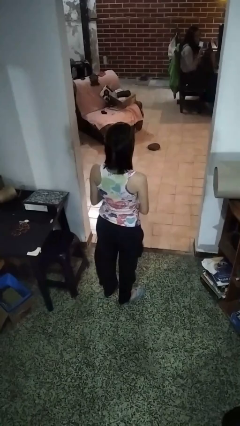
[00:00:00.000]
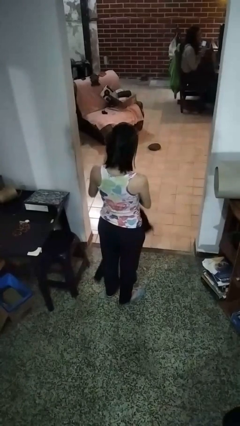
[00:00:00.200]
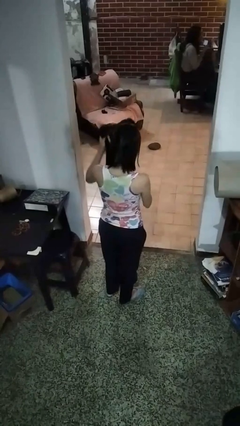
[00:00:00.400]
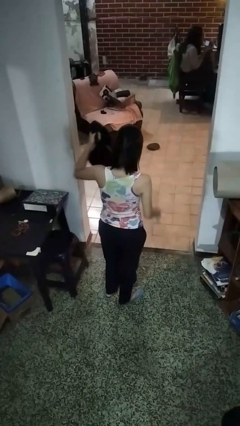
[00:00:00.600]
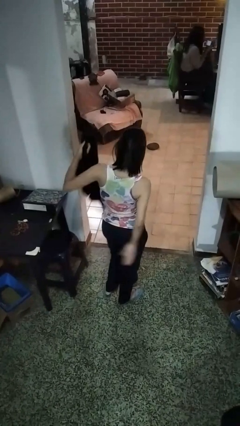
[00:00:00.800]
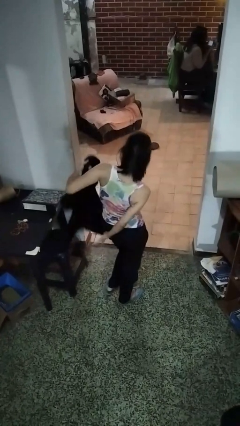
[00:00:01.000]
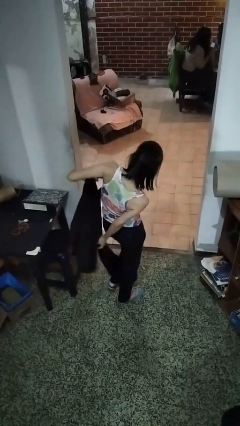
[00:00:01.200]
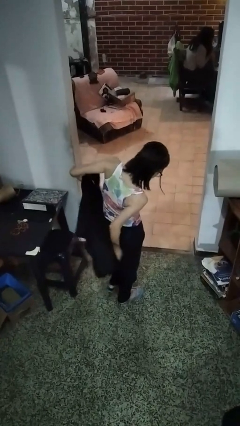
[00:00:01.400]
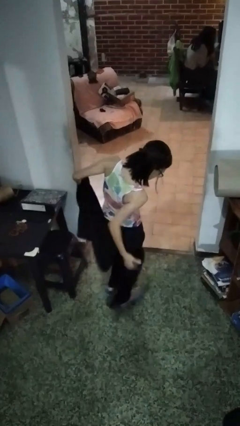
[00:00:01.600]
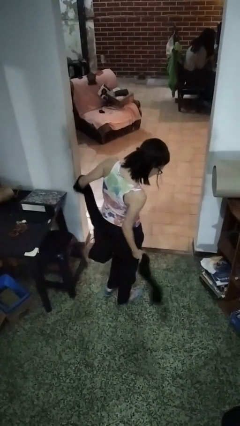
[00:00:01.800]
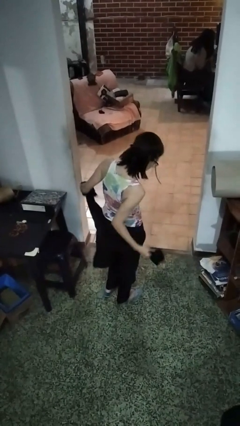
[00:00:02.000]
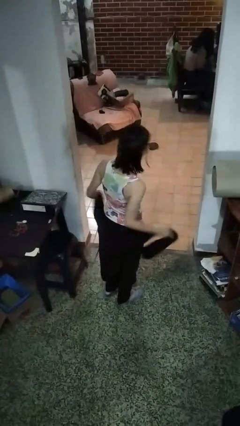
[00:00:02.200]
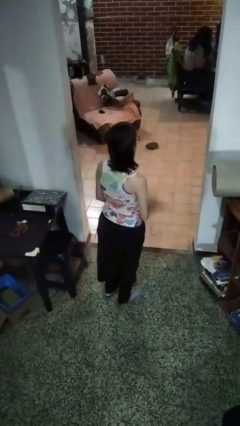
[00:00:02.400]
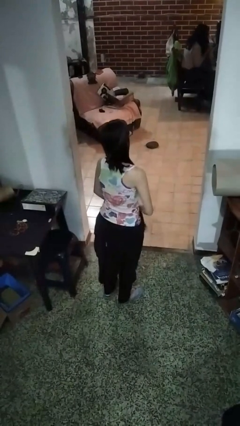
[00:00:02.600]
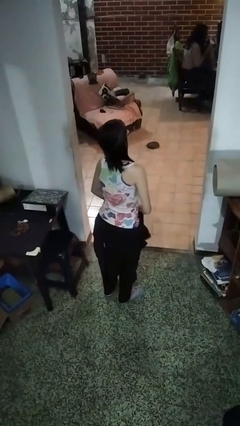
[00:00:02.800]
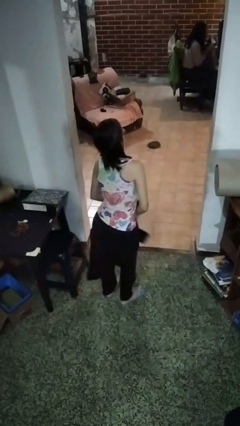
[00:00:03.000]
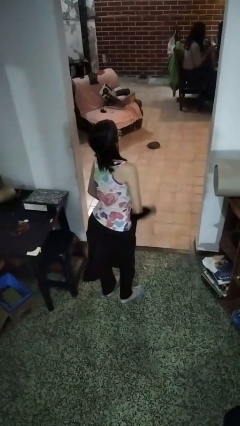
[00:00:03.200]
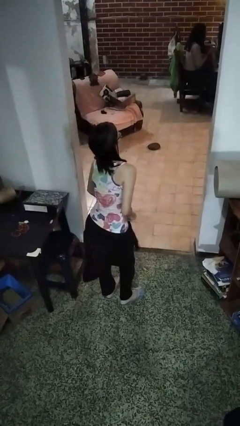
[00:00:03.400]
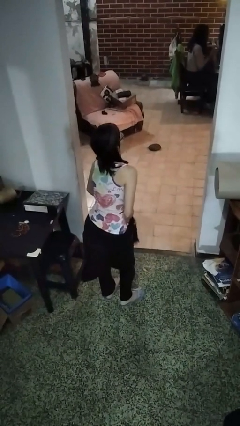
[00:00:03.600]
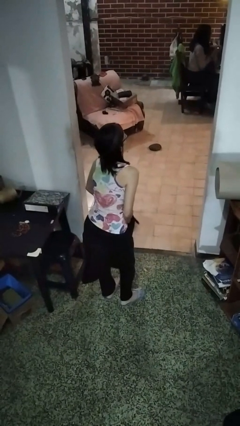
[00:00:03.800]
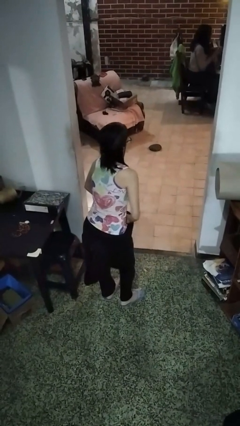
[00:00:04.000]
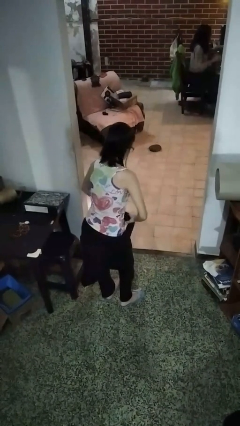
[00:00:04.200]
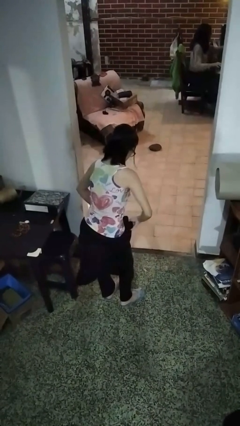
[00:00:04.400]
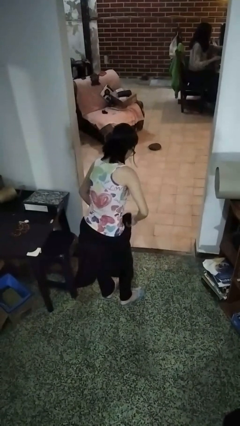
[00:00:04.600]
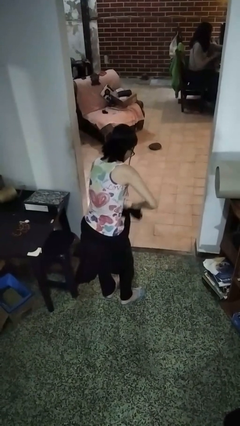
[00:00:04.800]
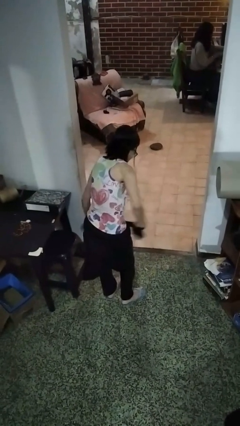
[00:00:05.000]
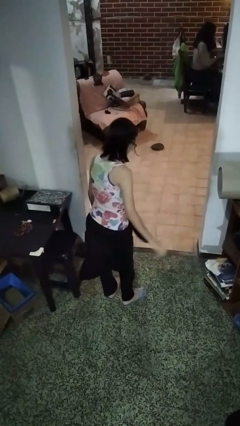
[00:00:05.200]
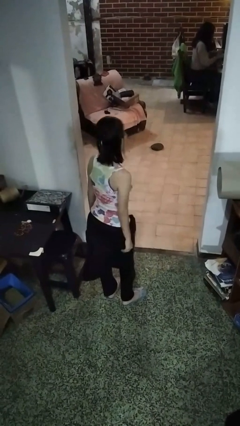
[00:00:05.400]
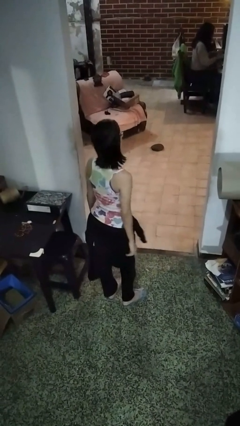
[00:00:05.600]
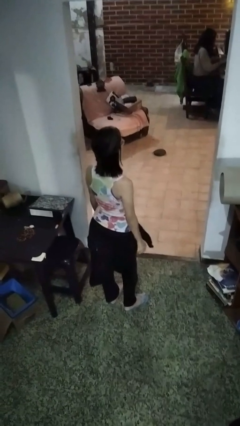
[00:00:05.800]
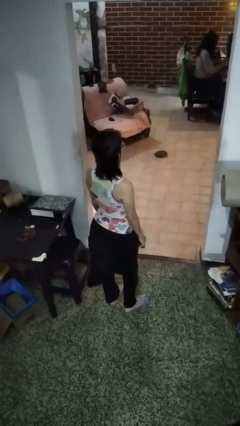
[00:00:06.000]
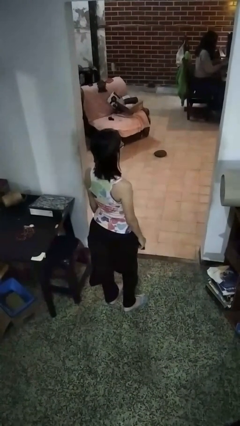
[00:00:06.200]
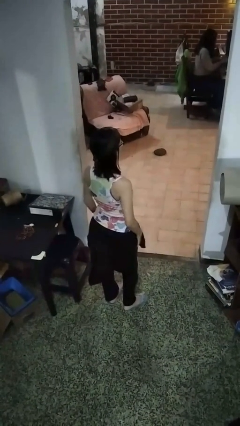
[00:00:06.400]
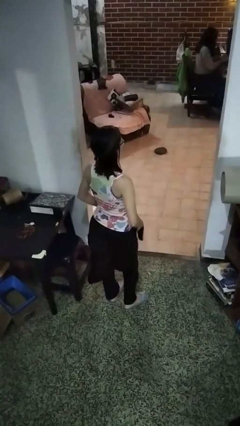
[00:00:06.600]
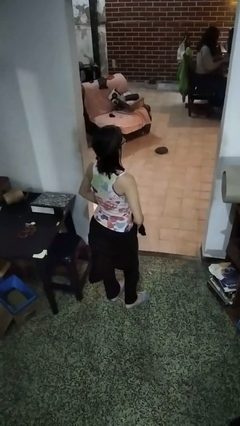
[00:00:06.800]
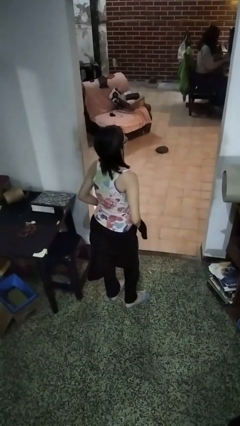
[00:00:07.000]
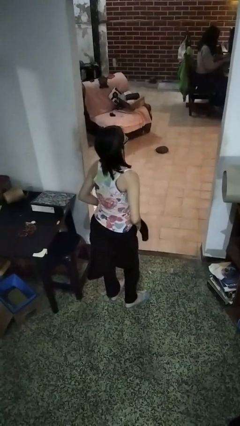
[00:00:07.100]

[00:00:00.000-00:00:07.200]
person ties jacket around waist

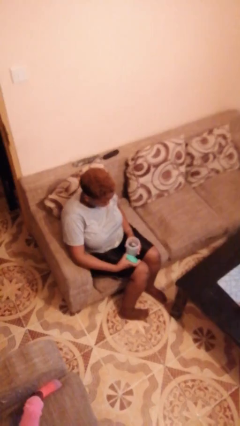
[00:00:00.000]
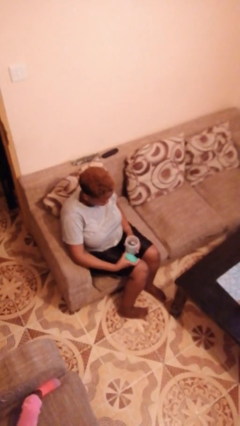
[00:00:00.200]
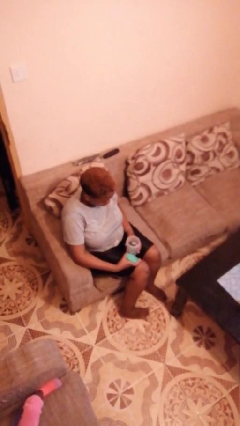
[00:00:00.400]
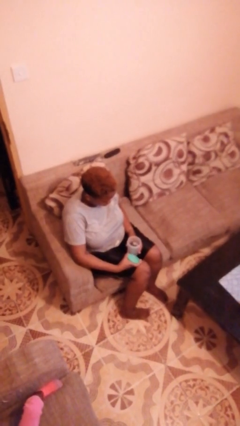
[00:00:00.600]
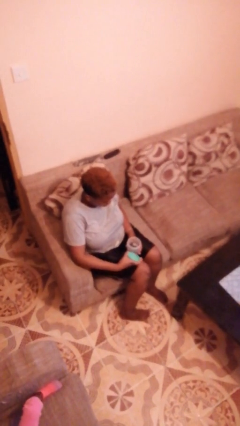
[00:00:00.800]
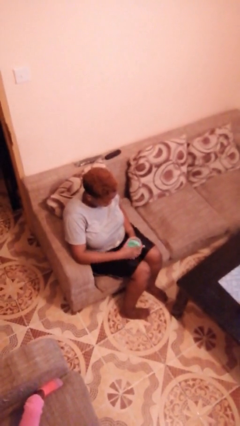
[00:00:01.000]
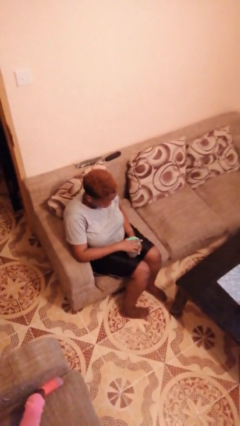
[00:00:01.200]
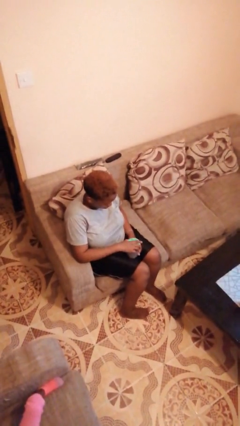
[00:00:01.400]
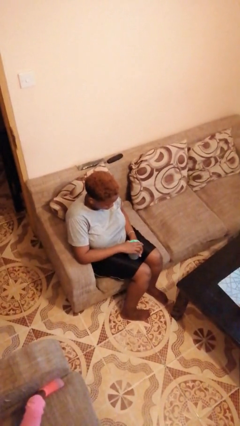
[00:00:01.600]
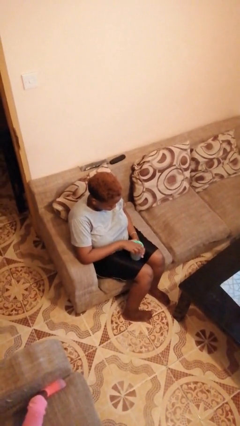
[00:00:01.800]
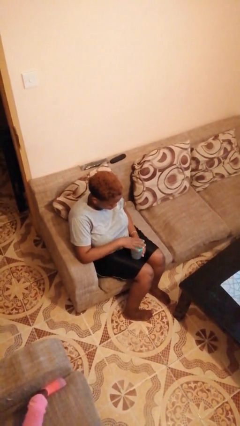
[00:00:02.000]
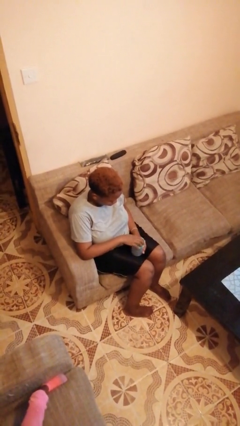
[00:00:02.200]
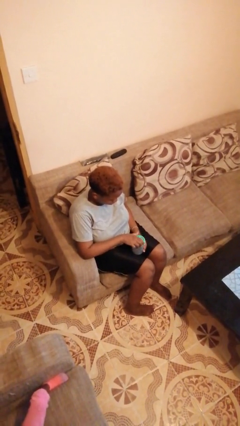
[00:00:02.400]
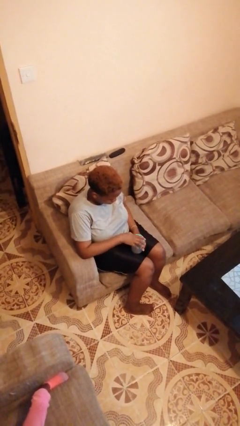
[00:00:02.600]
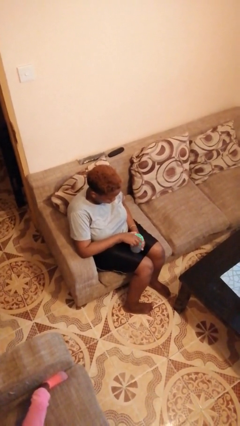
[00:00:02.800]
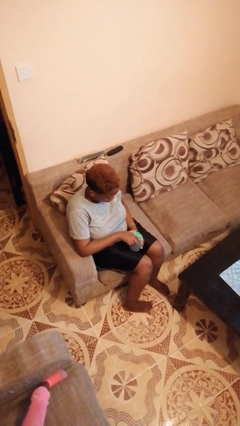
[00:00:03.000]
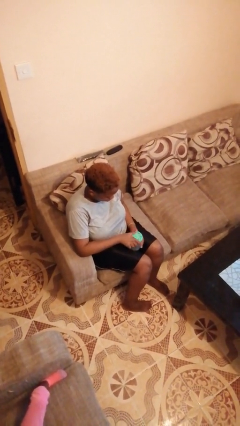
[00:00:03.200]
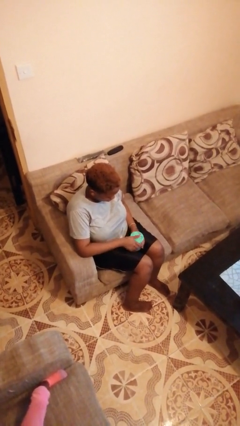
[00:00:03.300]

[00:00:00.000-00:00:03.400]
person closes jar

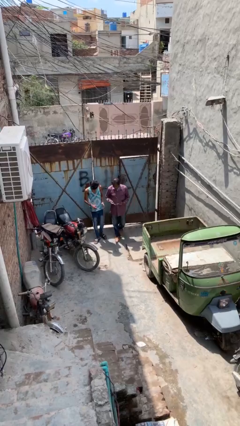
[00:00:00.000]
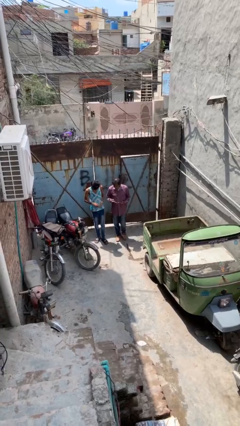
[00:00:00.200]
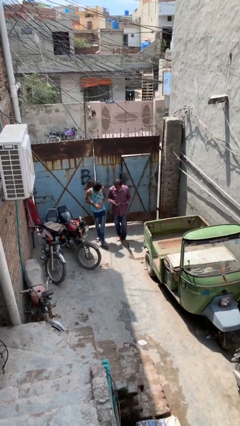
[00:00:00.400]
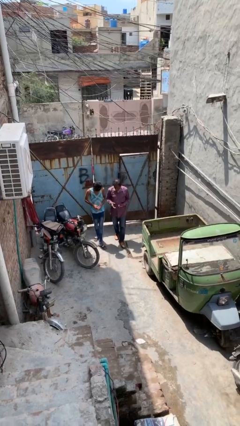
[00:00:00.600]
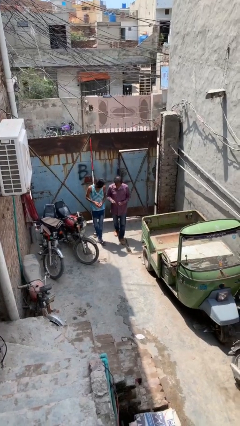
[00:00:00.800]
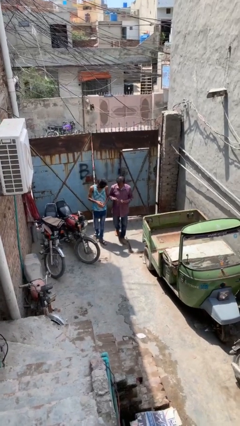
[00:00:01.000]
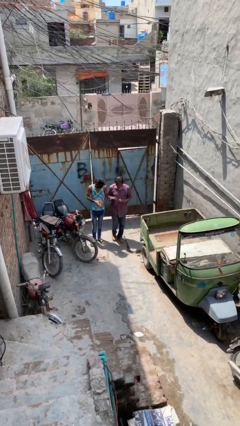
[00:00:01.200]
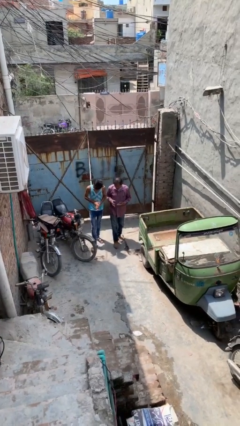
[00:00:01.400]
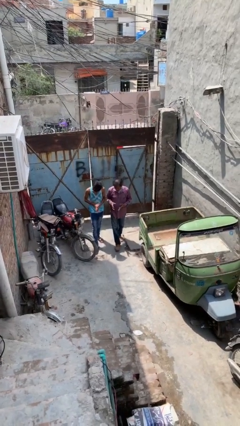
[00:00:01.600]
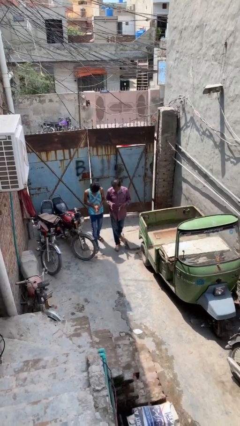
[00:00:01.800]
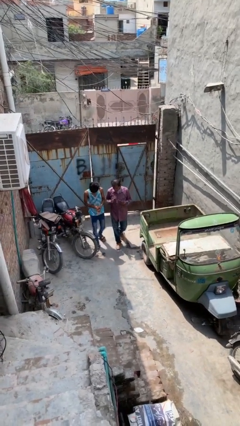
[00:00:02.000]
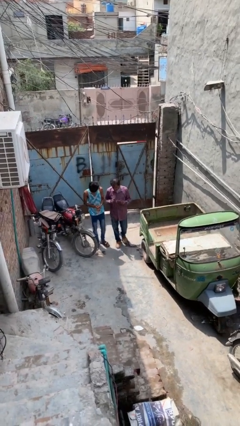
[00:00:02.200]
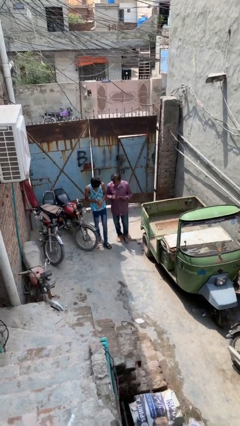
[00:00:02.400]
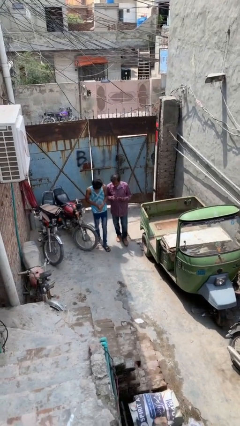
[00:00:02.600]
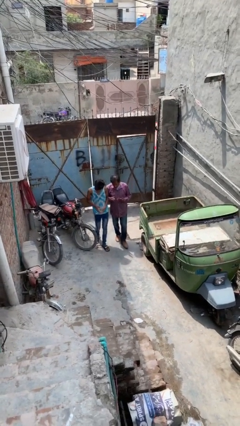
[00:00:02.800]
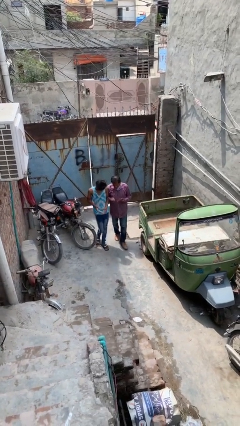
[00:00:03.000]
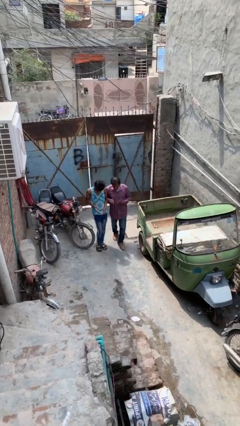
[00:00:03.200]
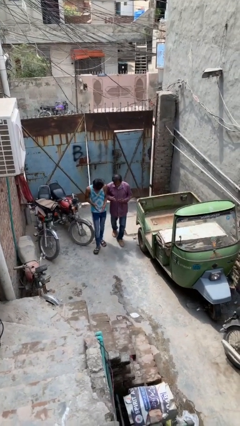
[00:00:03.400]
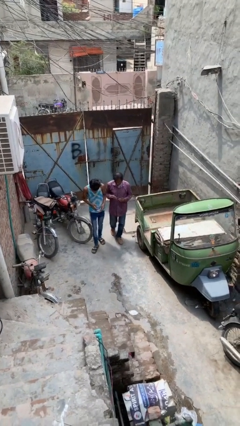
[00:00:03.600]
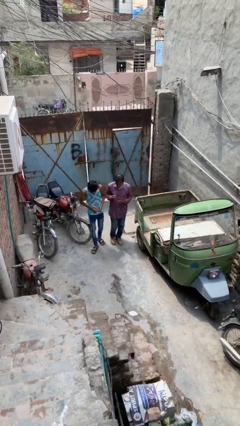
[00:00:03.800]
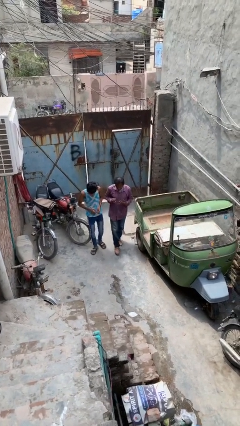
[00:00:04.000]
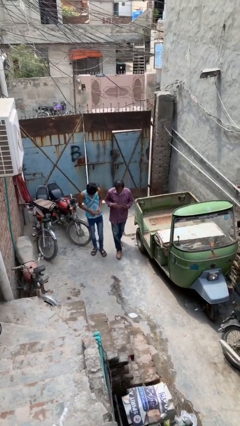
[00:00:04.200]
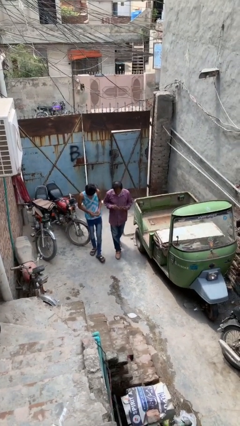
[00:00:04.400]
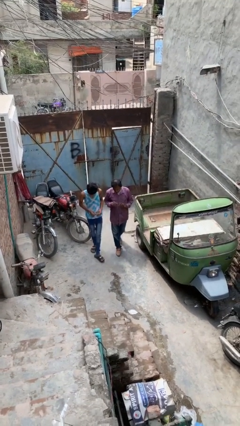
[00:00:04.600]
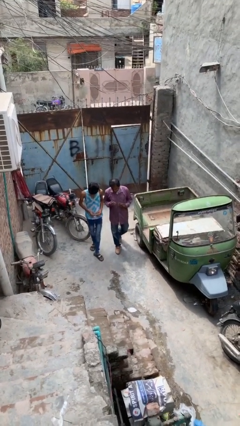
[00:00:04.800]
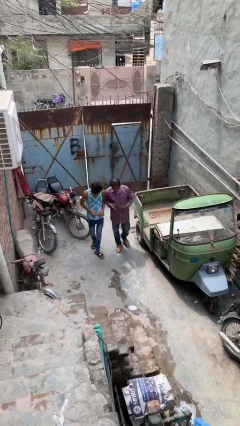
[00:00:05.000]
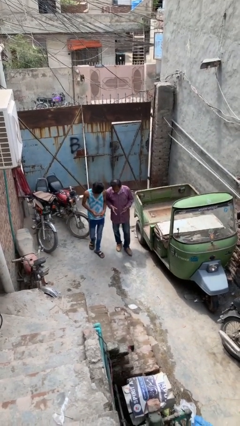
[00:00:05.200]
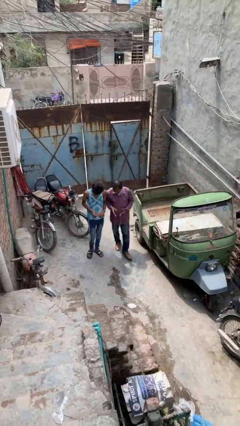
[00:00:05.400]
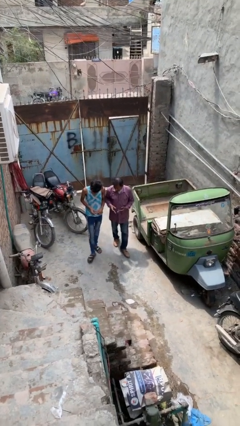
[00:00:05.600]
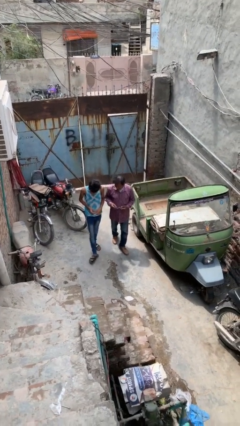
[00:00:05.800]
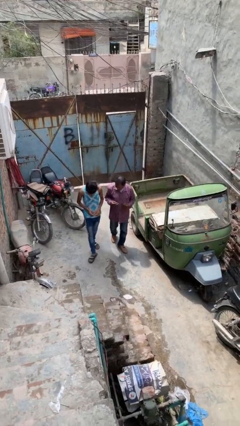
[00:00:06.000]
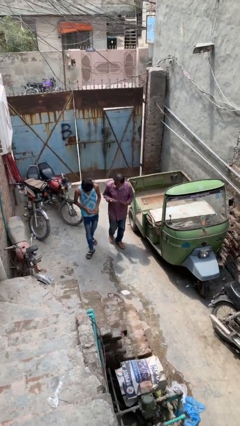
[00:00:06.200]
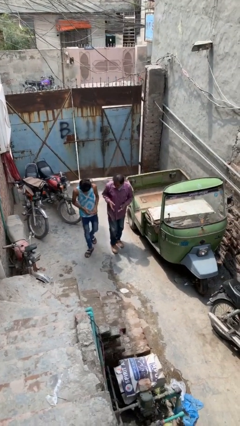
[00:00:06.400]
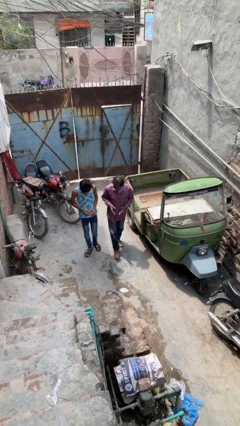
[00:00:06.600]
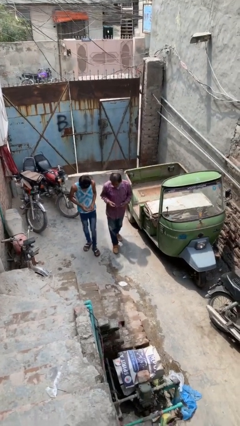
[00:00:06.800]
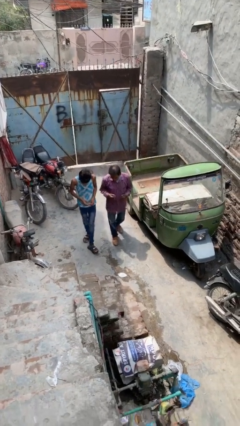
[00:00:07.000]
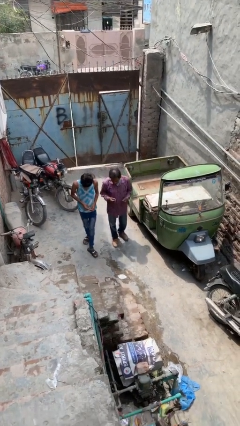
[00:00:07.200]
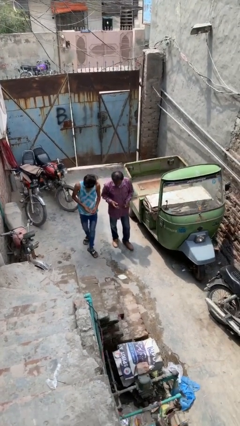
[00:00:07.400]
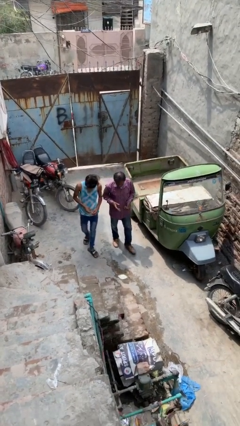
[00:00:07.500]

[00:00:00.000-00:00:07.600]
person talks to person
